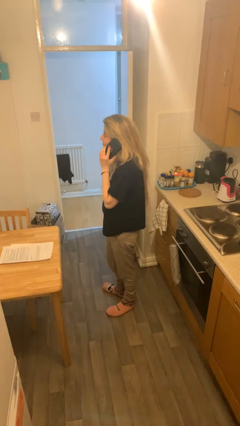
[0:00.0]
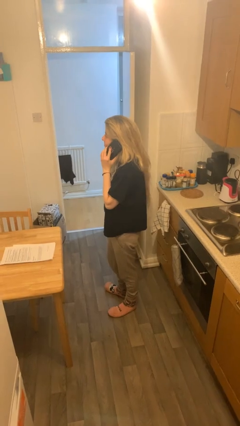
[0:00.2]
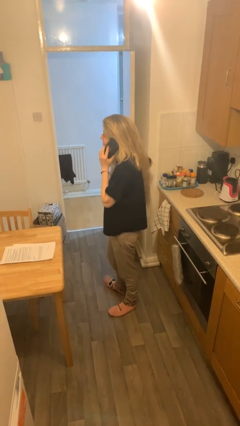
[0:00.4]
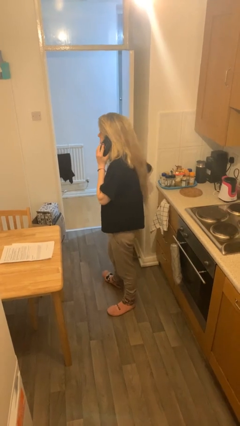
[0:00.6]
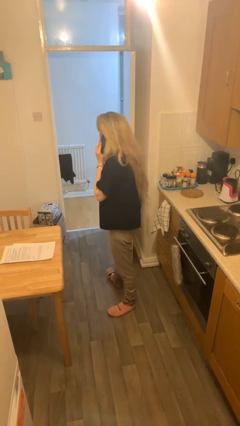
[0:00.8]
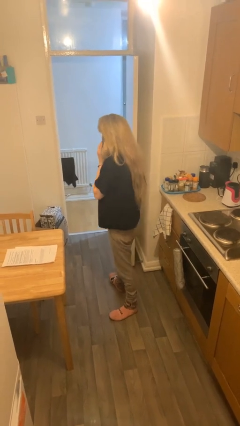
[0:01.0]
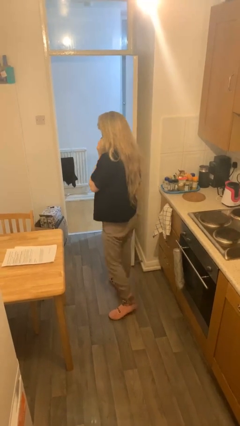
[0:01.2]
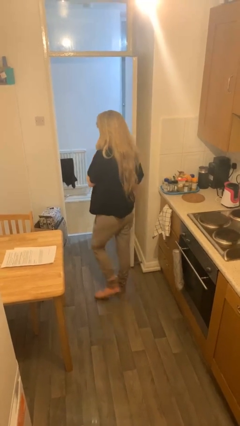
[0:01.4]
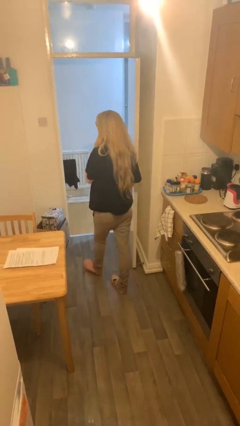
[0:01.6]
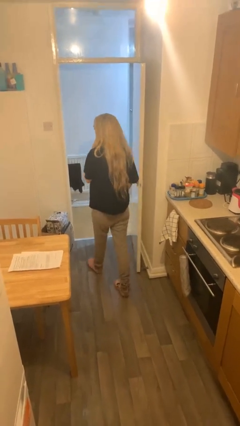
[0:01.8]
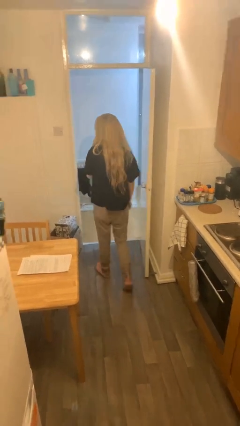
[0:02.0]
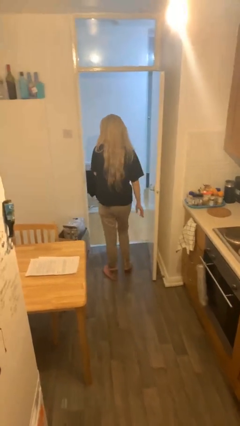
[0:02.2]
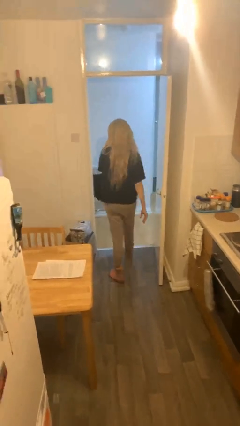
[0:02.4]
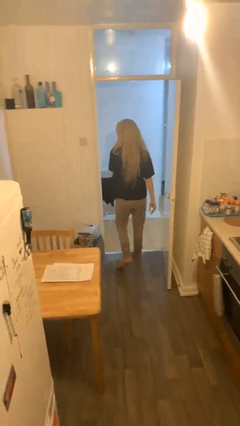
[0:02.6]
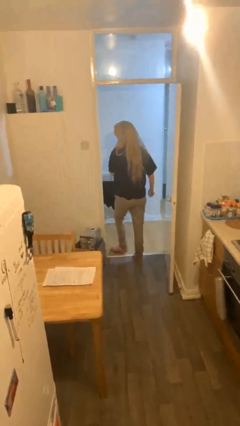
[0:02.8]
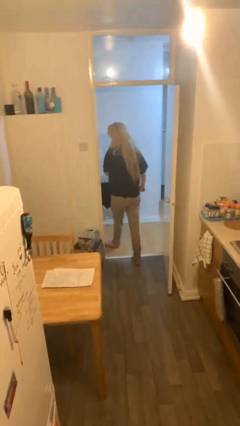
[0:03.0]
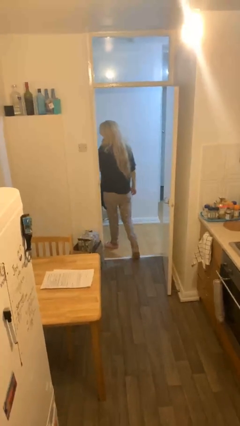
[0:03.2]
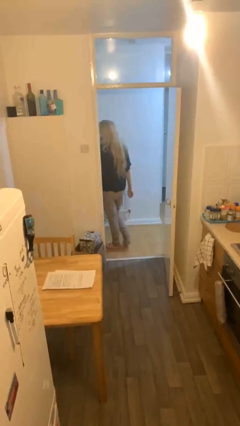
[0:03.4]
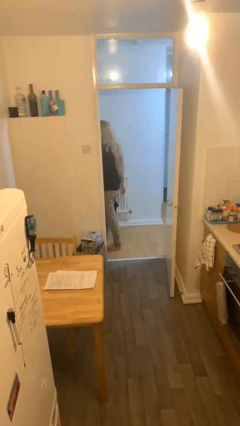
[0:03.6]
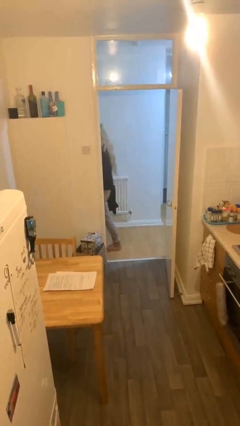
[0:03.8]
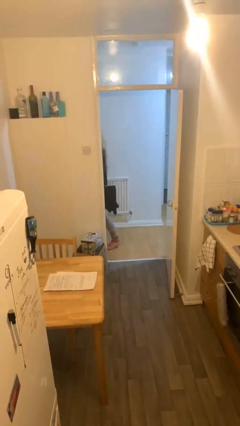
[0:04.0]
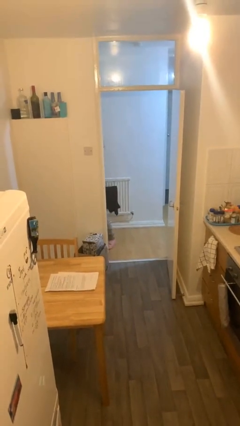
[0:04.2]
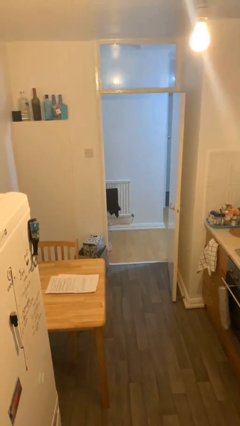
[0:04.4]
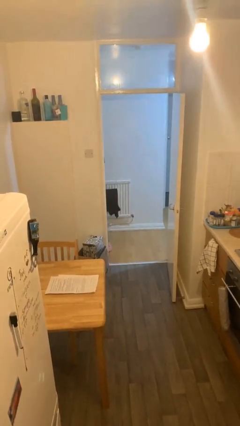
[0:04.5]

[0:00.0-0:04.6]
person exits scene through structure

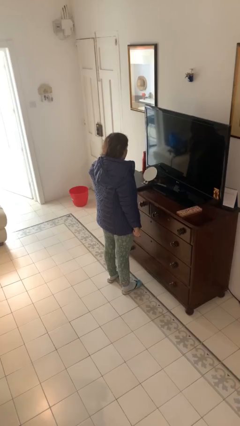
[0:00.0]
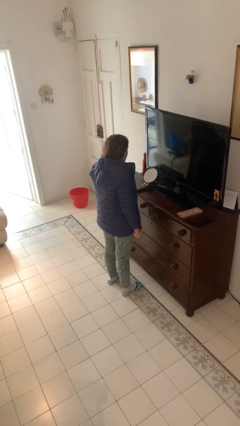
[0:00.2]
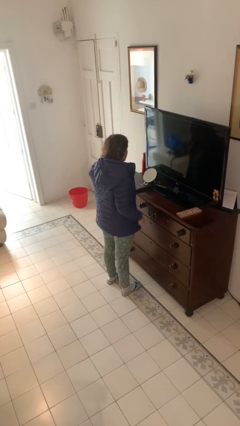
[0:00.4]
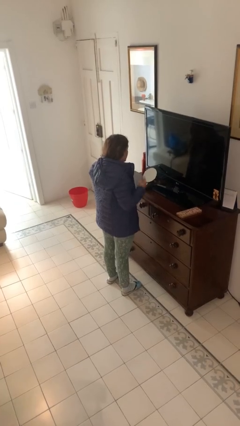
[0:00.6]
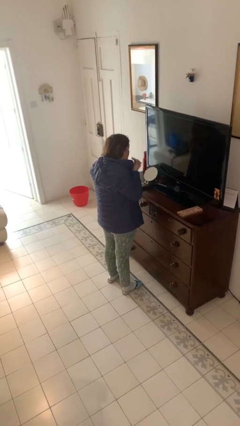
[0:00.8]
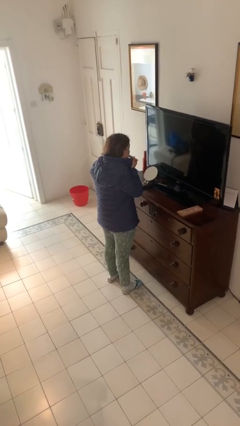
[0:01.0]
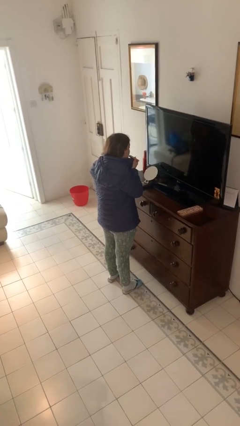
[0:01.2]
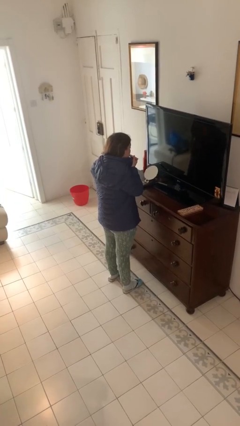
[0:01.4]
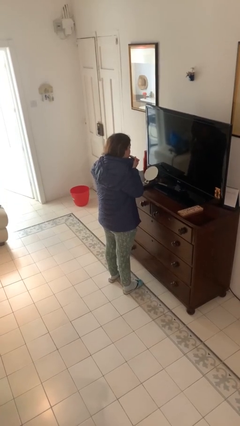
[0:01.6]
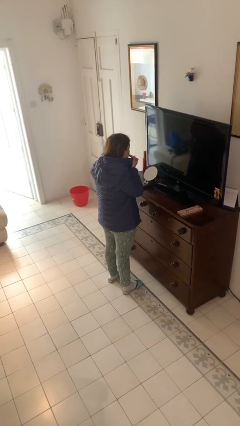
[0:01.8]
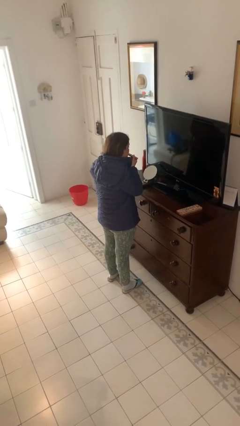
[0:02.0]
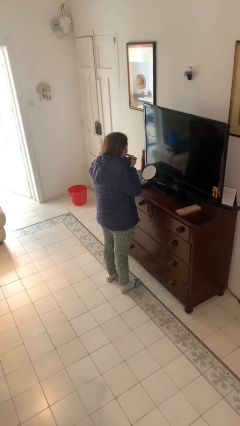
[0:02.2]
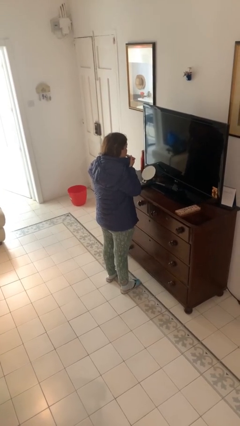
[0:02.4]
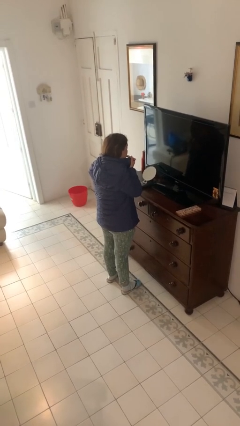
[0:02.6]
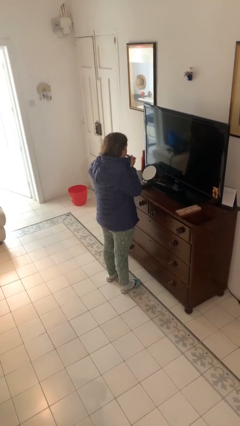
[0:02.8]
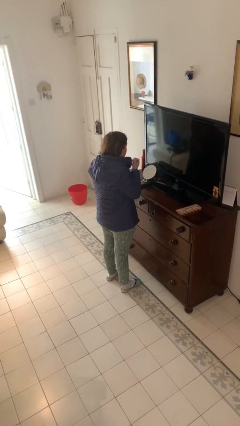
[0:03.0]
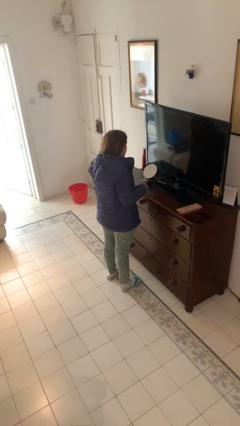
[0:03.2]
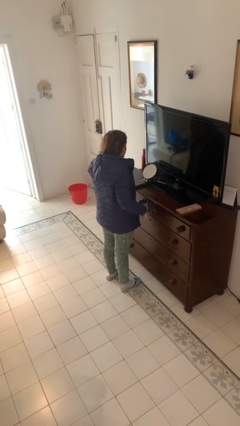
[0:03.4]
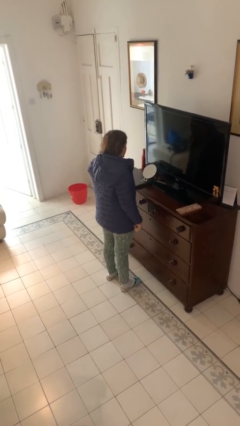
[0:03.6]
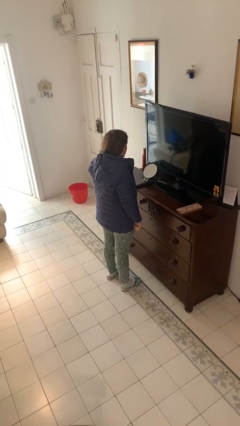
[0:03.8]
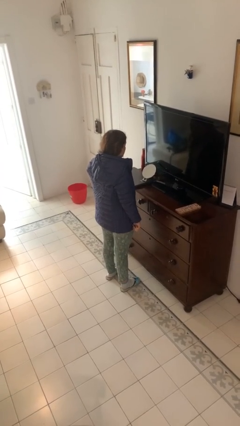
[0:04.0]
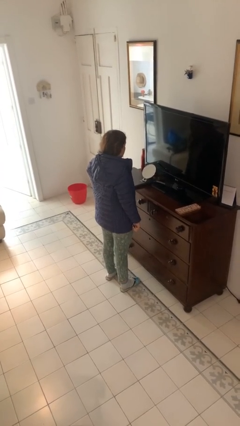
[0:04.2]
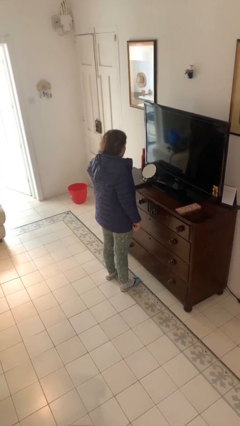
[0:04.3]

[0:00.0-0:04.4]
person applies lip makeup

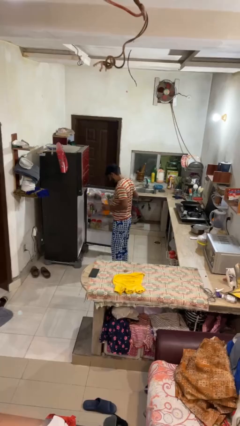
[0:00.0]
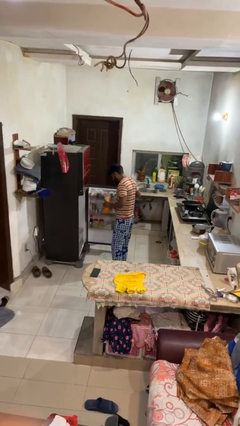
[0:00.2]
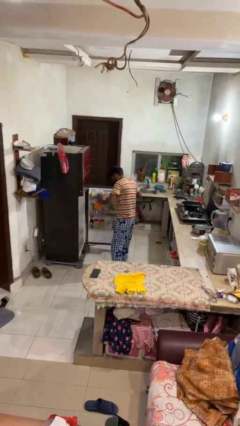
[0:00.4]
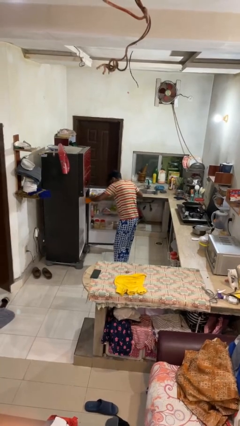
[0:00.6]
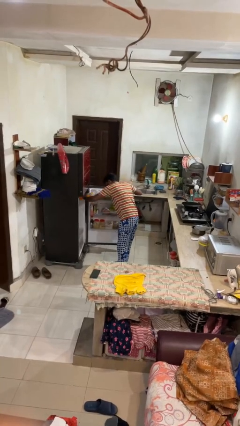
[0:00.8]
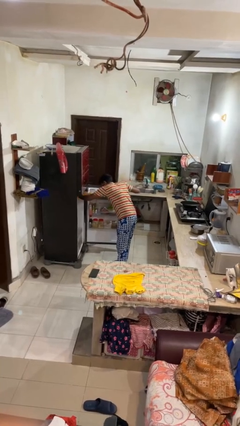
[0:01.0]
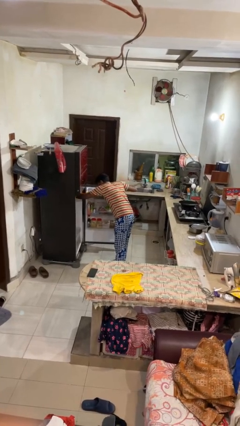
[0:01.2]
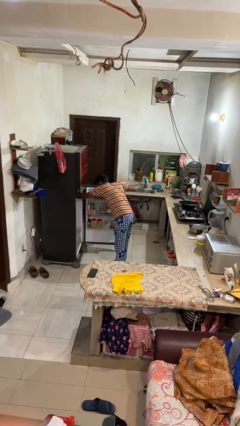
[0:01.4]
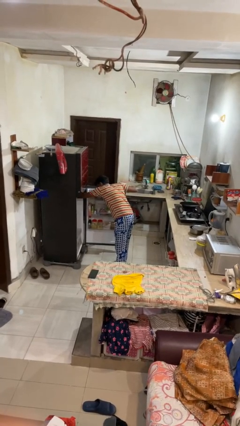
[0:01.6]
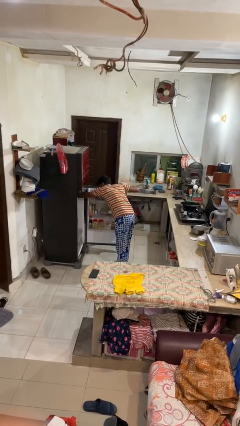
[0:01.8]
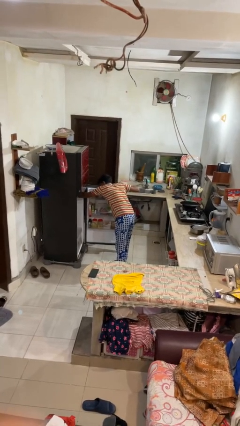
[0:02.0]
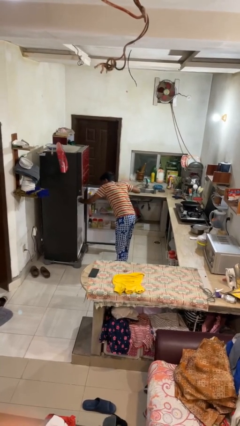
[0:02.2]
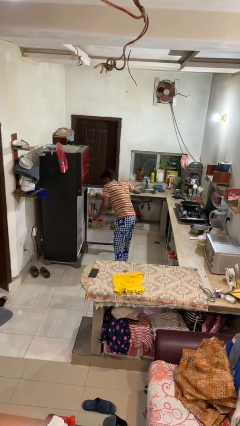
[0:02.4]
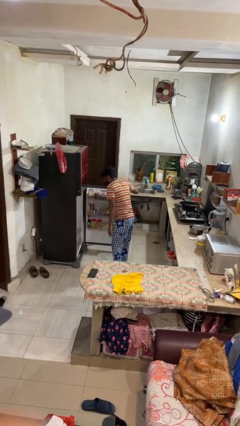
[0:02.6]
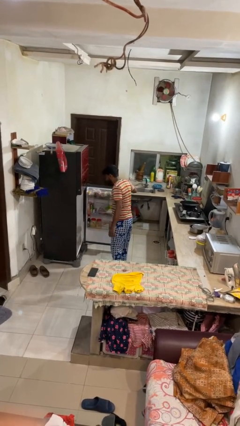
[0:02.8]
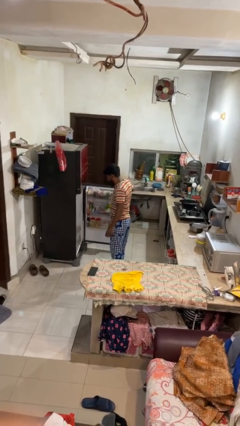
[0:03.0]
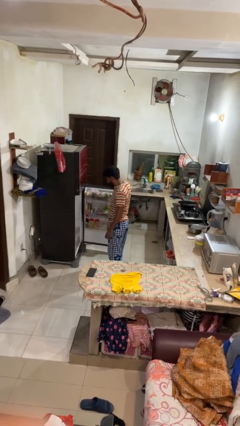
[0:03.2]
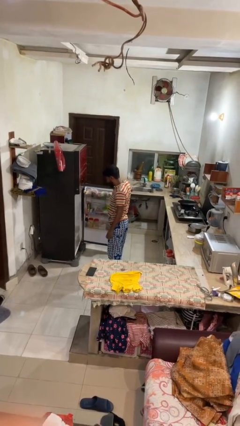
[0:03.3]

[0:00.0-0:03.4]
person puts object into refrigerator

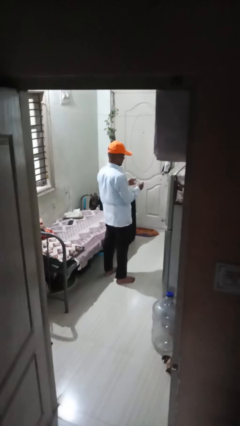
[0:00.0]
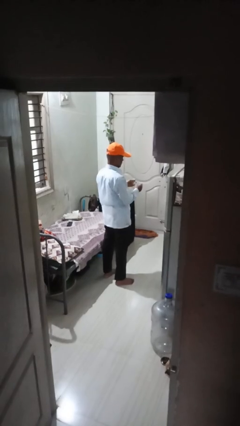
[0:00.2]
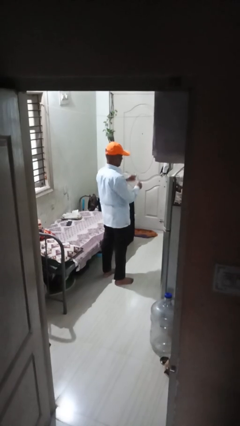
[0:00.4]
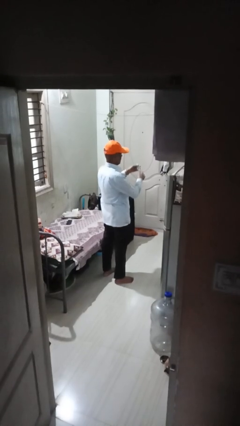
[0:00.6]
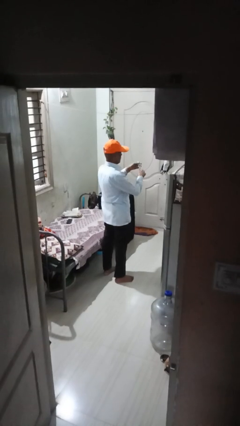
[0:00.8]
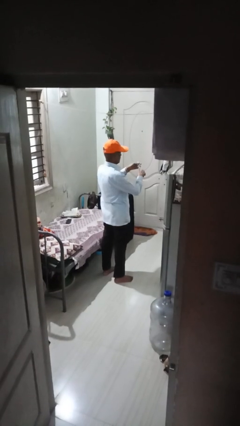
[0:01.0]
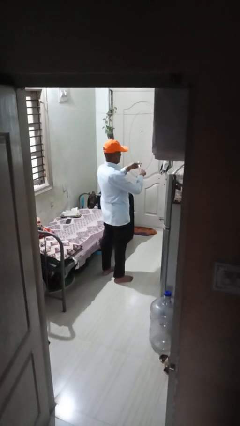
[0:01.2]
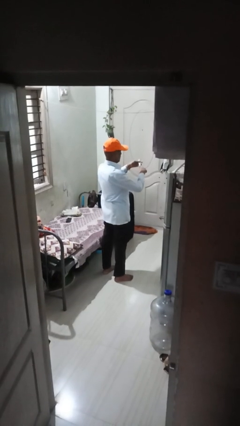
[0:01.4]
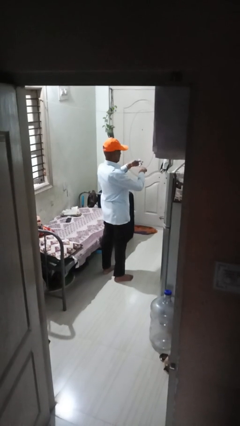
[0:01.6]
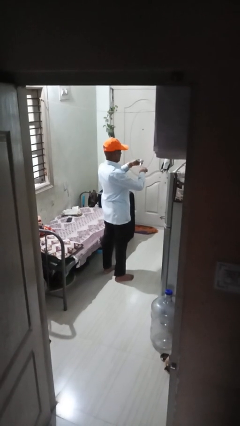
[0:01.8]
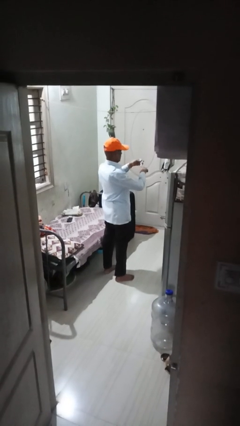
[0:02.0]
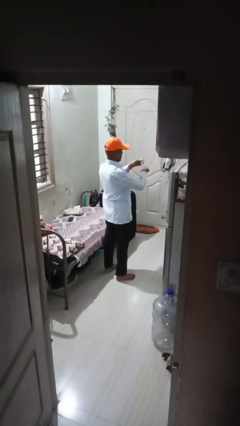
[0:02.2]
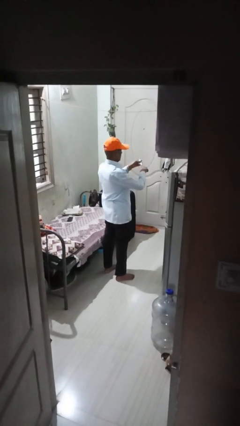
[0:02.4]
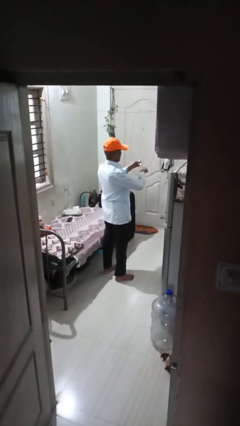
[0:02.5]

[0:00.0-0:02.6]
person clips fingernails

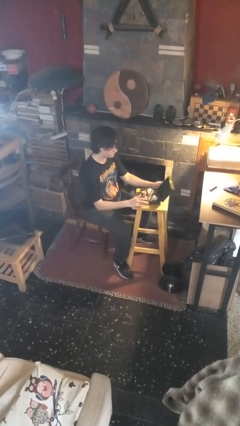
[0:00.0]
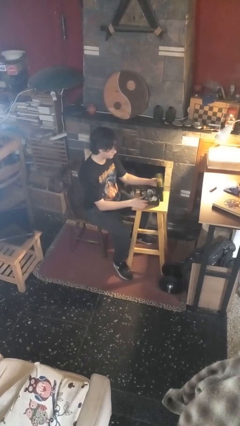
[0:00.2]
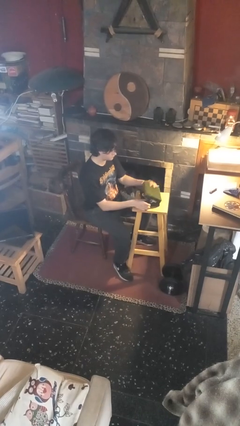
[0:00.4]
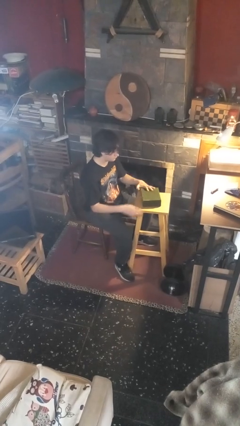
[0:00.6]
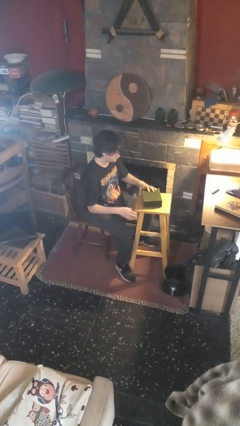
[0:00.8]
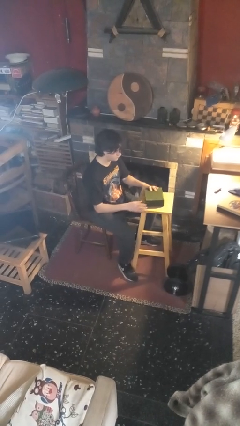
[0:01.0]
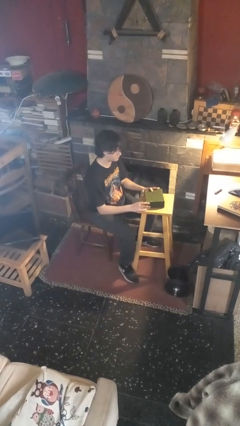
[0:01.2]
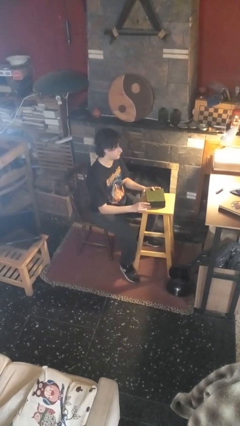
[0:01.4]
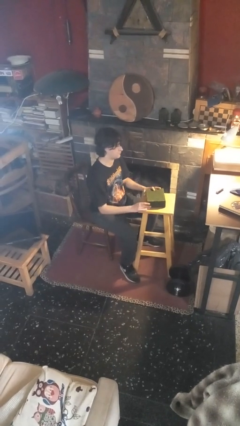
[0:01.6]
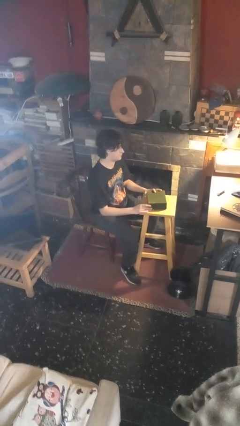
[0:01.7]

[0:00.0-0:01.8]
person closes jewelry box

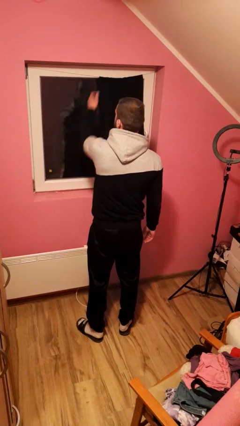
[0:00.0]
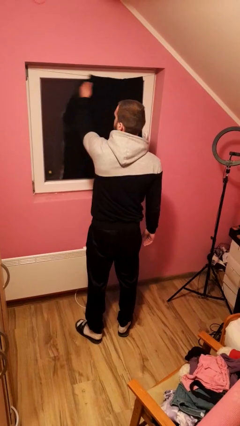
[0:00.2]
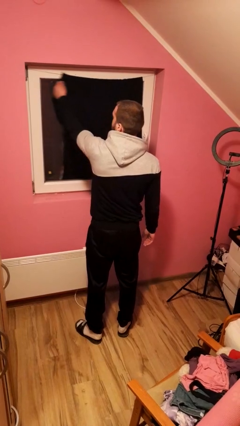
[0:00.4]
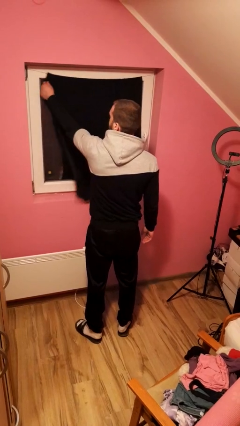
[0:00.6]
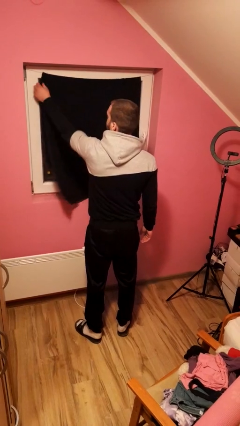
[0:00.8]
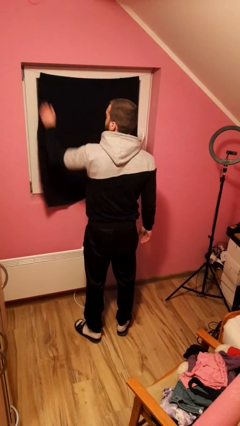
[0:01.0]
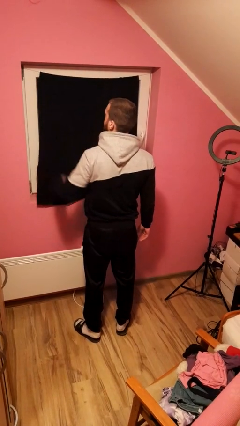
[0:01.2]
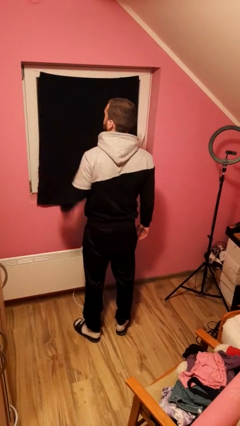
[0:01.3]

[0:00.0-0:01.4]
person closes curtains
